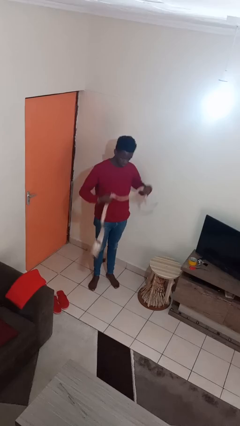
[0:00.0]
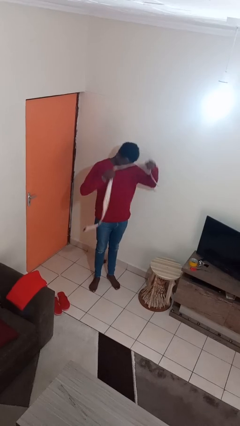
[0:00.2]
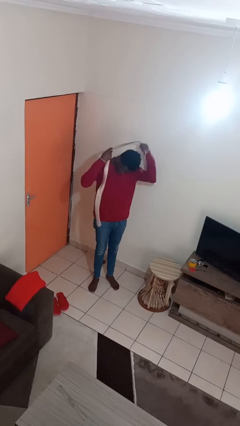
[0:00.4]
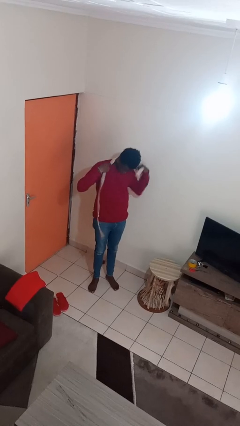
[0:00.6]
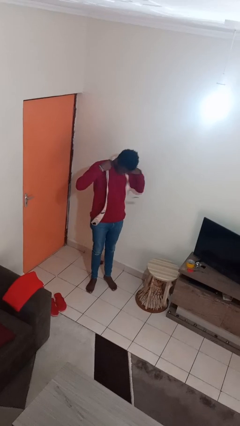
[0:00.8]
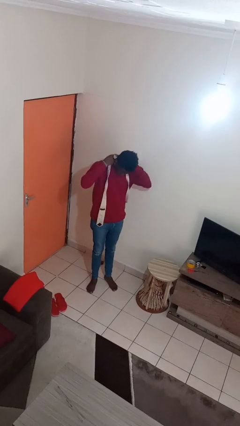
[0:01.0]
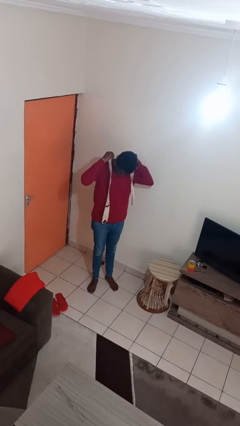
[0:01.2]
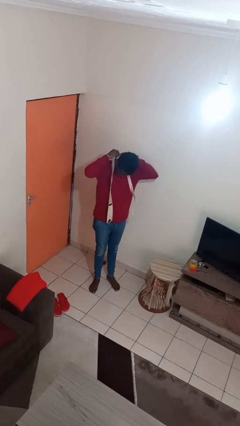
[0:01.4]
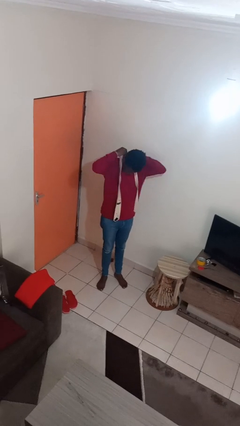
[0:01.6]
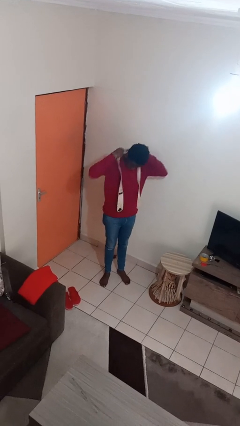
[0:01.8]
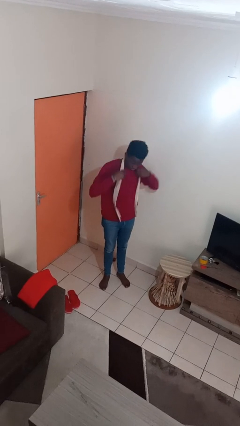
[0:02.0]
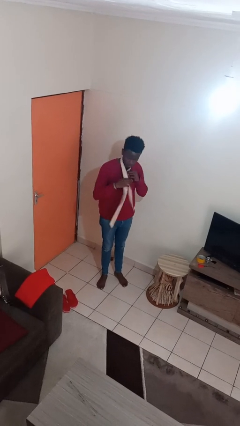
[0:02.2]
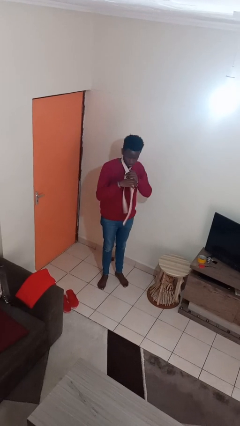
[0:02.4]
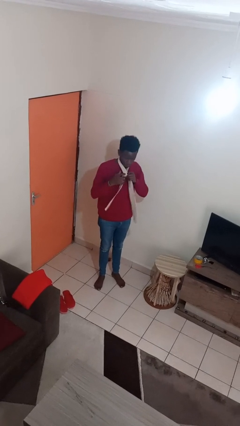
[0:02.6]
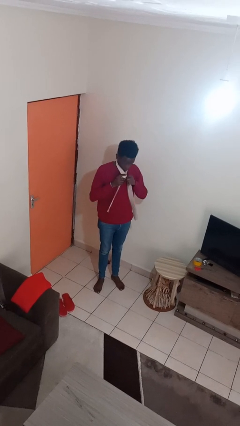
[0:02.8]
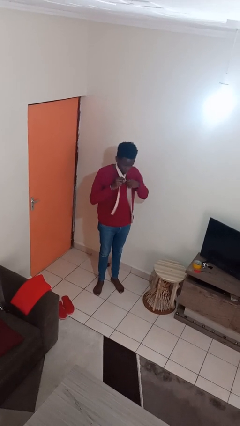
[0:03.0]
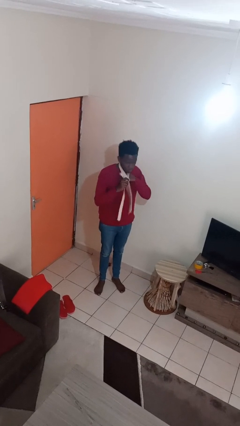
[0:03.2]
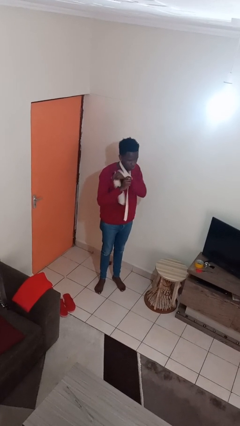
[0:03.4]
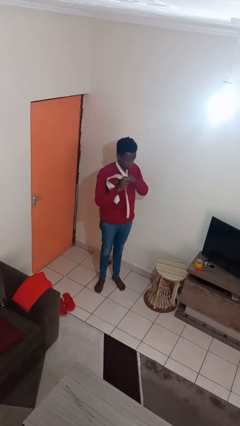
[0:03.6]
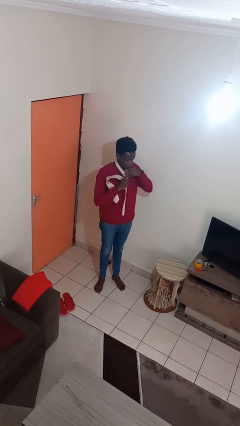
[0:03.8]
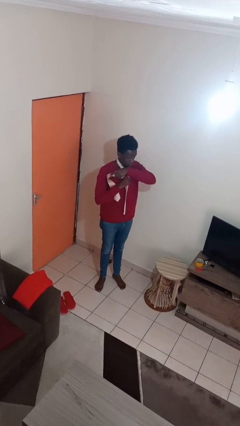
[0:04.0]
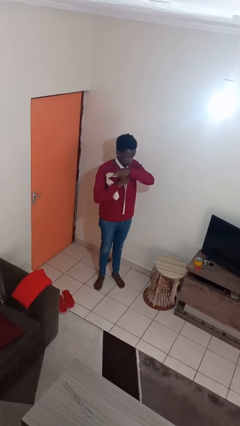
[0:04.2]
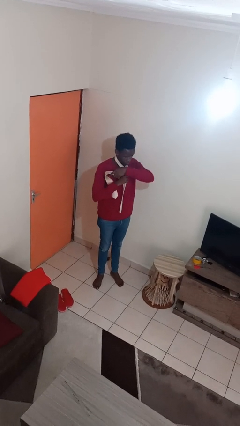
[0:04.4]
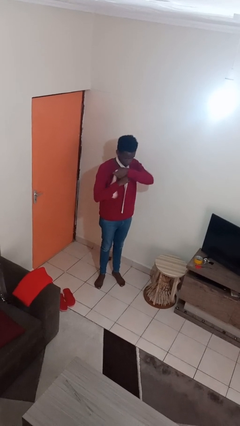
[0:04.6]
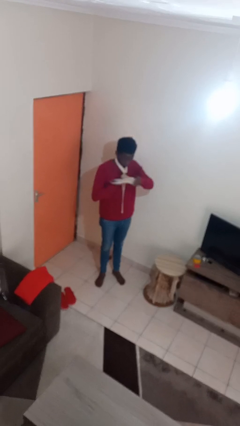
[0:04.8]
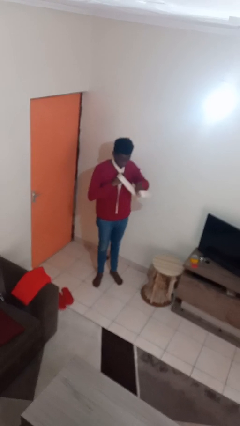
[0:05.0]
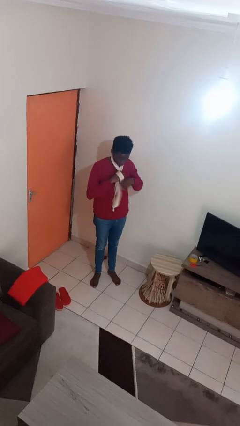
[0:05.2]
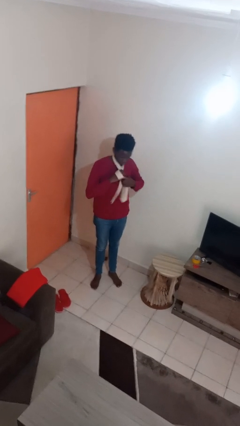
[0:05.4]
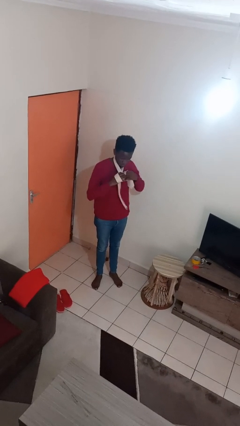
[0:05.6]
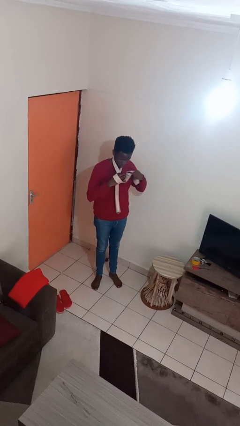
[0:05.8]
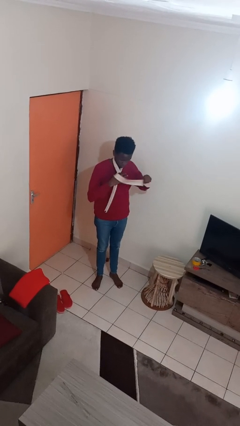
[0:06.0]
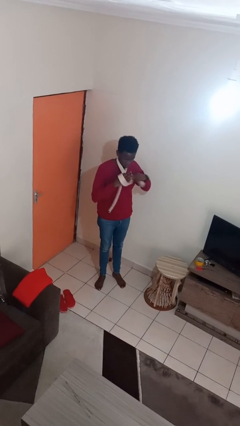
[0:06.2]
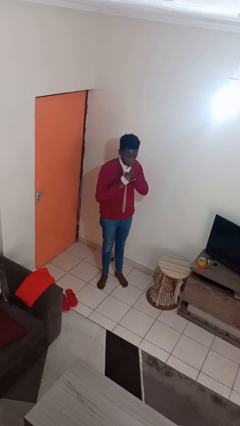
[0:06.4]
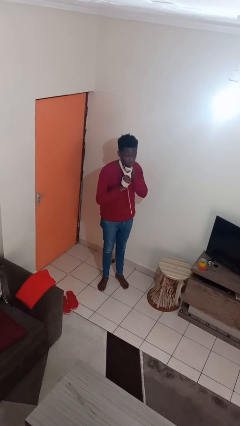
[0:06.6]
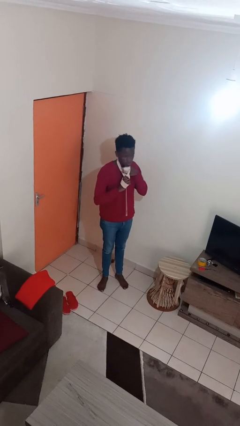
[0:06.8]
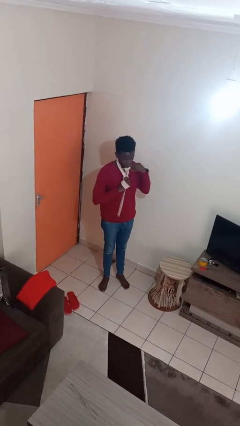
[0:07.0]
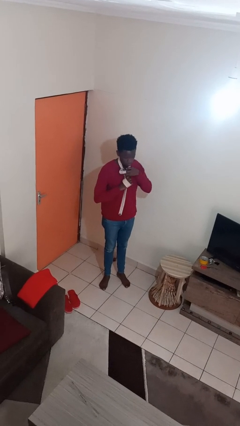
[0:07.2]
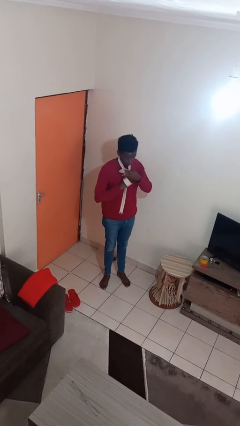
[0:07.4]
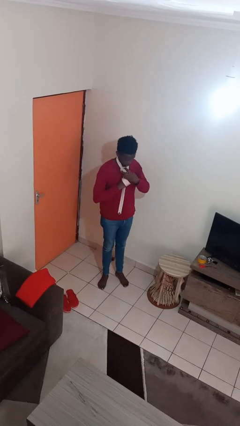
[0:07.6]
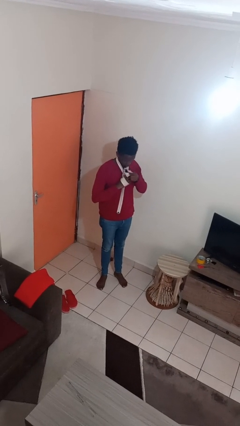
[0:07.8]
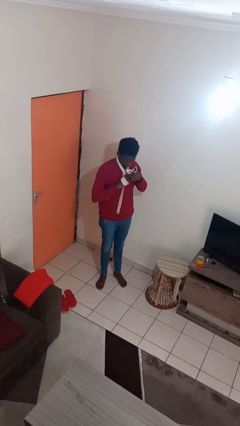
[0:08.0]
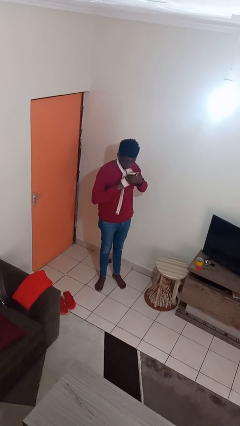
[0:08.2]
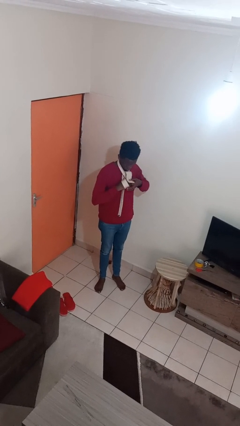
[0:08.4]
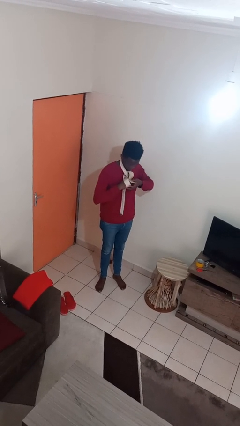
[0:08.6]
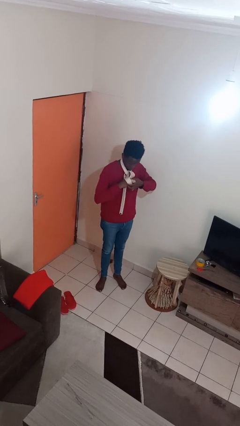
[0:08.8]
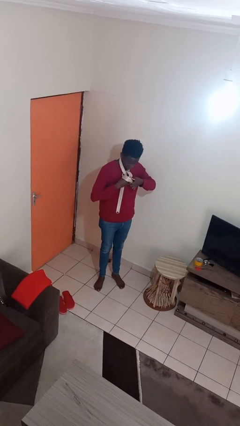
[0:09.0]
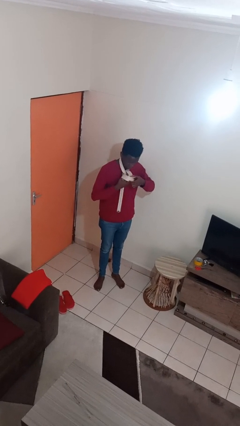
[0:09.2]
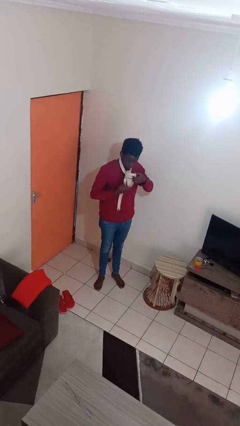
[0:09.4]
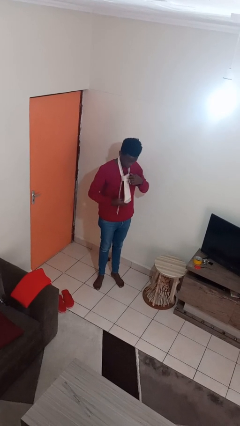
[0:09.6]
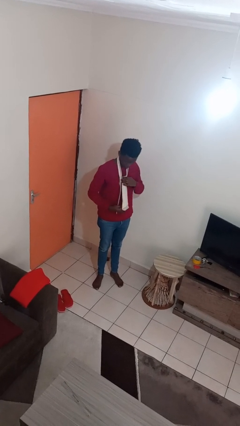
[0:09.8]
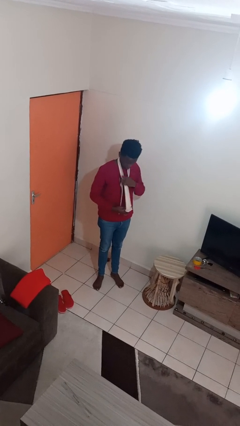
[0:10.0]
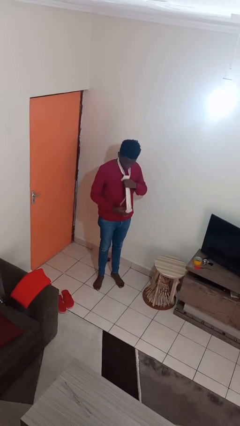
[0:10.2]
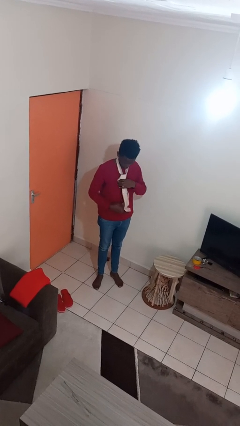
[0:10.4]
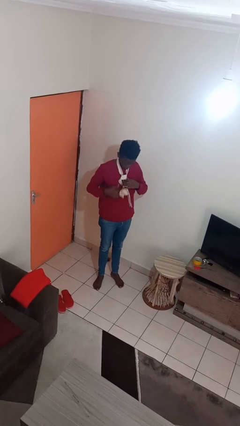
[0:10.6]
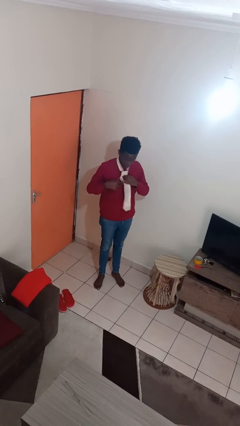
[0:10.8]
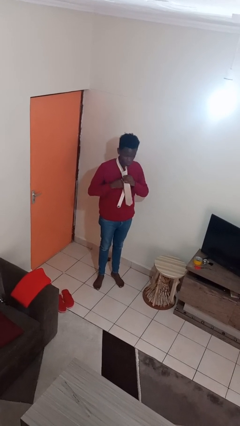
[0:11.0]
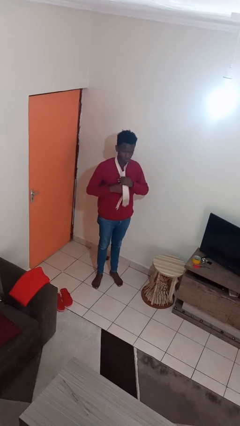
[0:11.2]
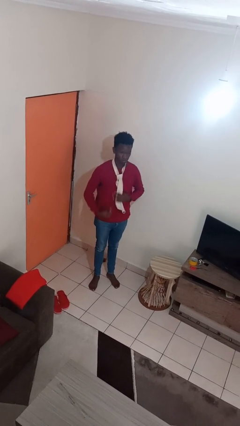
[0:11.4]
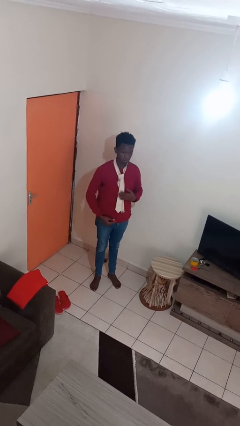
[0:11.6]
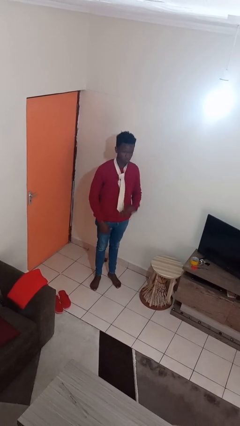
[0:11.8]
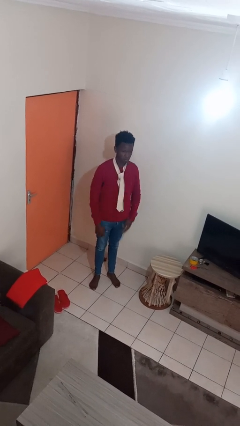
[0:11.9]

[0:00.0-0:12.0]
person puts on necktie

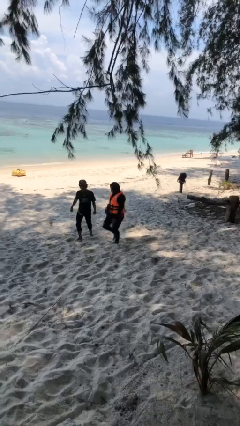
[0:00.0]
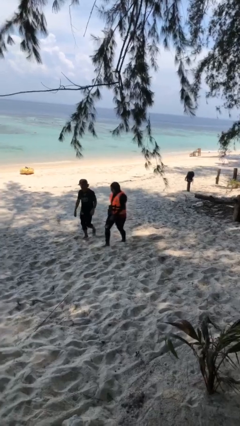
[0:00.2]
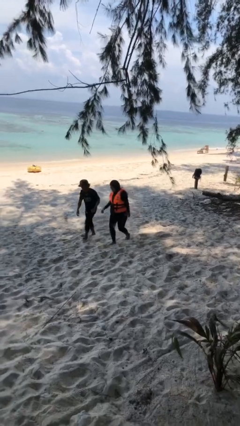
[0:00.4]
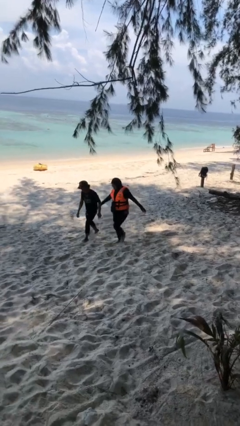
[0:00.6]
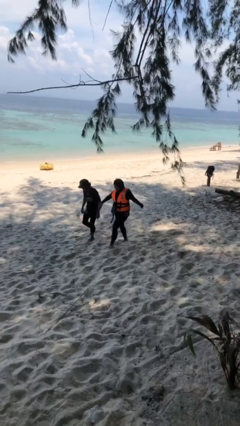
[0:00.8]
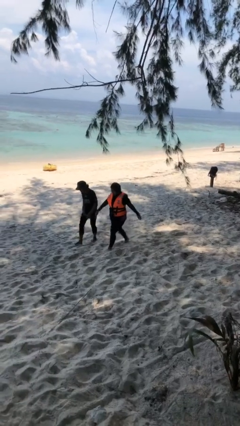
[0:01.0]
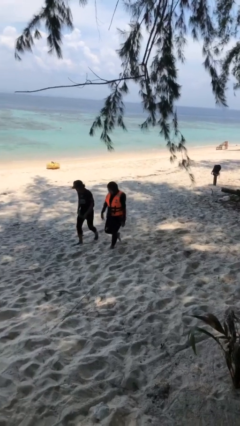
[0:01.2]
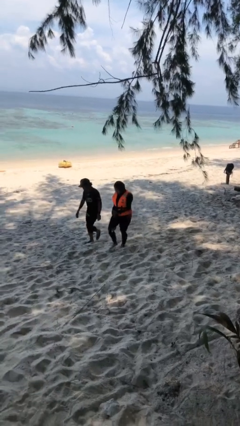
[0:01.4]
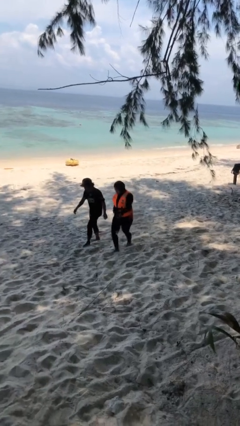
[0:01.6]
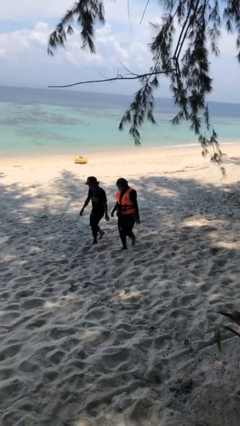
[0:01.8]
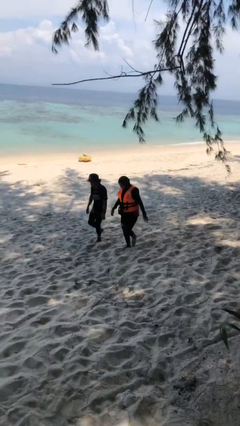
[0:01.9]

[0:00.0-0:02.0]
person talks to person

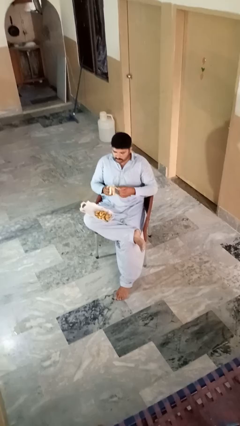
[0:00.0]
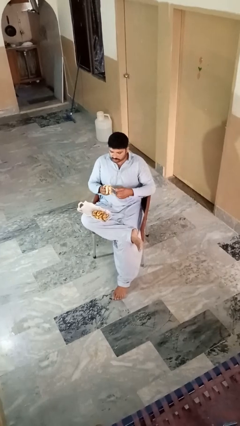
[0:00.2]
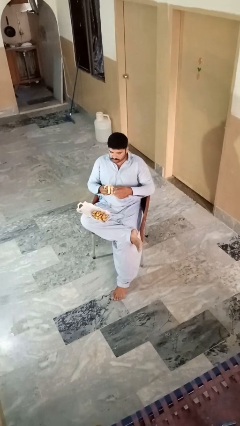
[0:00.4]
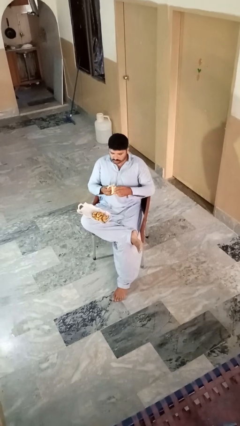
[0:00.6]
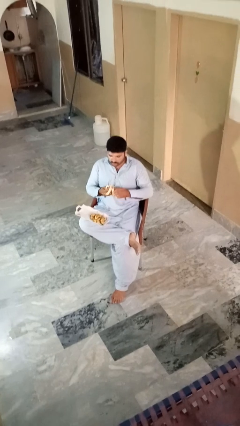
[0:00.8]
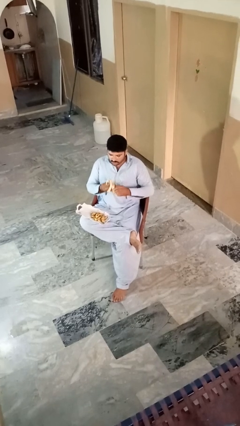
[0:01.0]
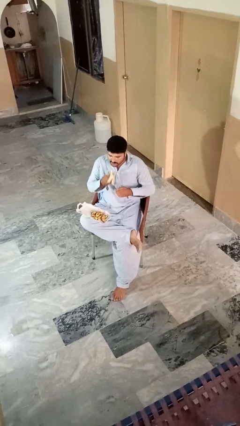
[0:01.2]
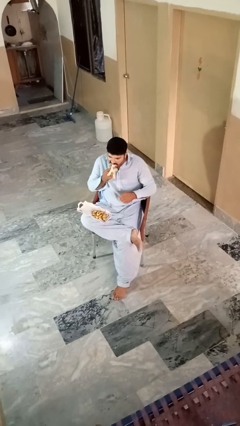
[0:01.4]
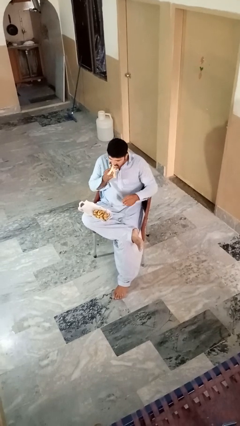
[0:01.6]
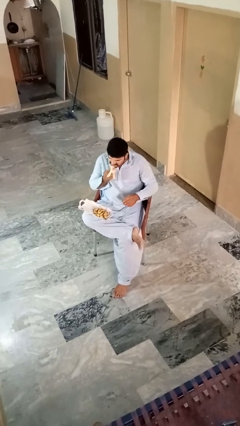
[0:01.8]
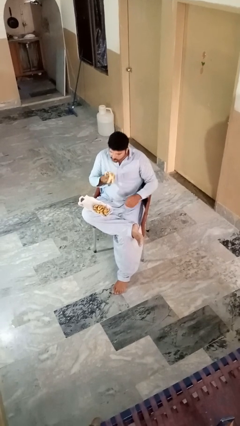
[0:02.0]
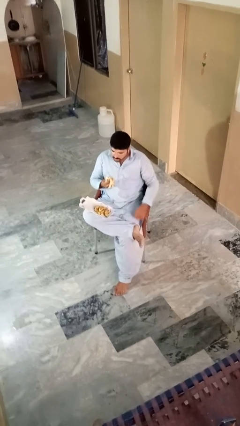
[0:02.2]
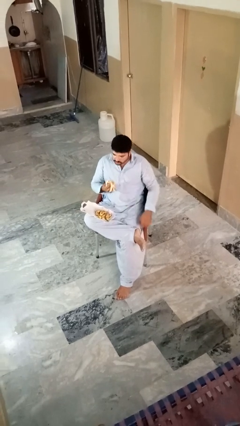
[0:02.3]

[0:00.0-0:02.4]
person eats banana

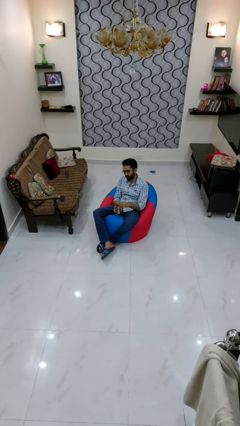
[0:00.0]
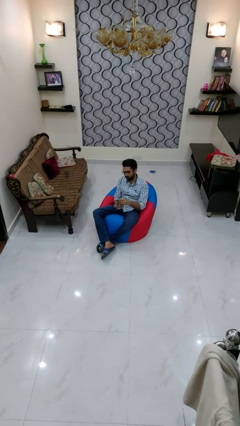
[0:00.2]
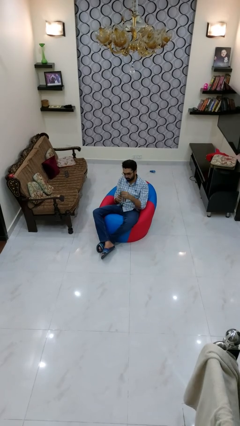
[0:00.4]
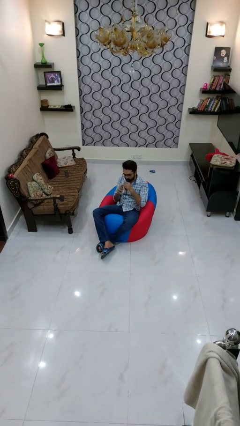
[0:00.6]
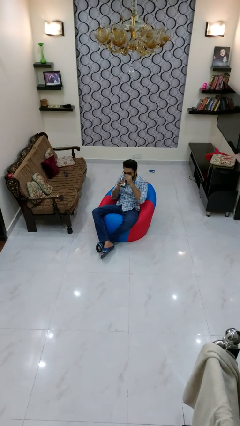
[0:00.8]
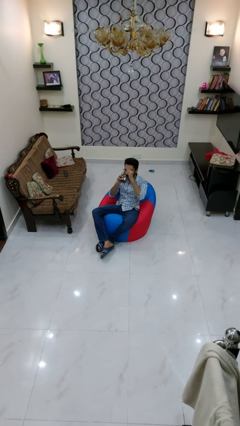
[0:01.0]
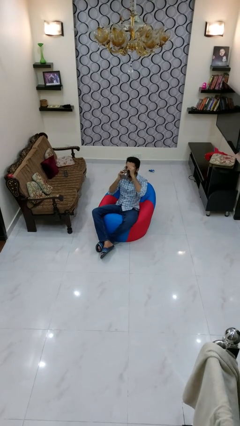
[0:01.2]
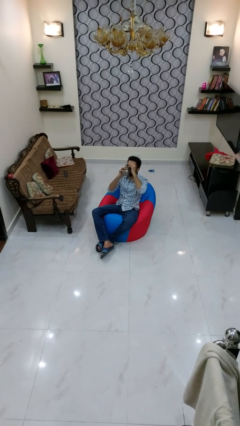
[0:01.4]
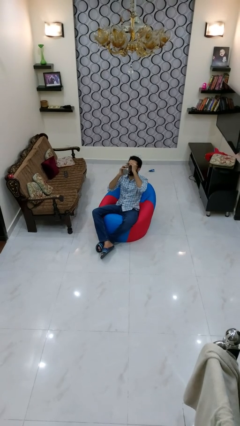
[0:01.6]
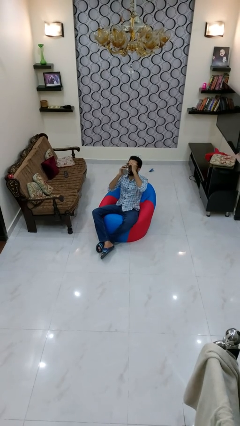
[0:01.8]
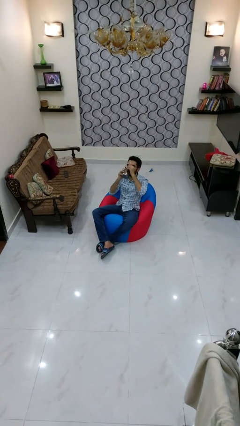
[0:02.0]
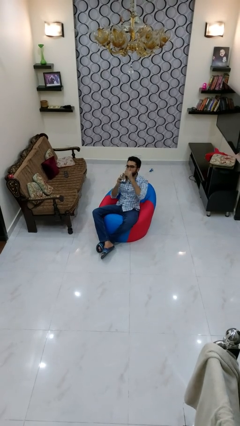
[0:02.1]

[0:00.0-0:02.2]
person drinks from mug
